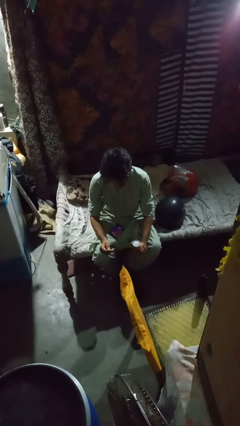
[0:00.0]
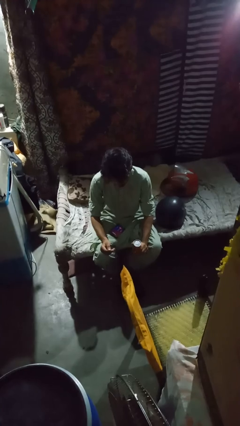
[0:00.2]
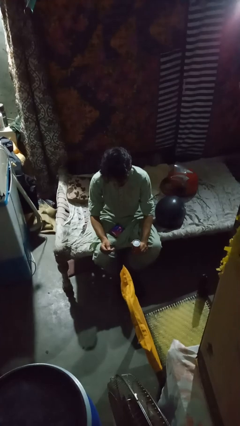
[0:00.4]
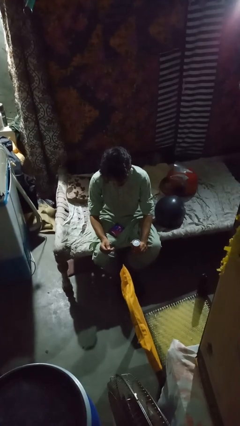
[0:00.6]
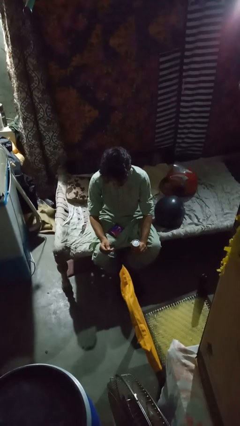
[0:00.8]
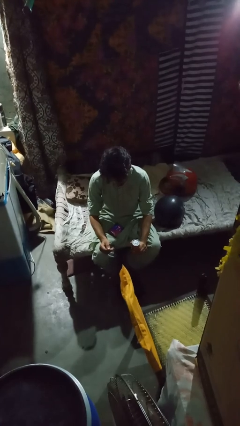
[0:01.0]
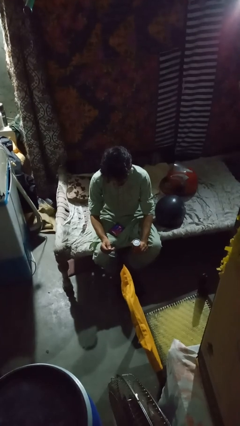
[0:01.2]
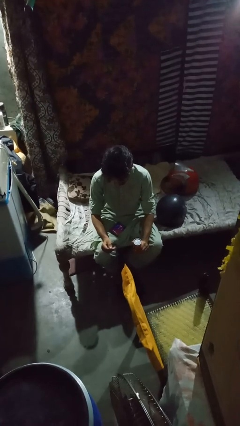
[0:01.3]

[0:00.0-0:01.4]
person opens can with can opener

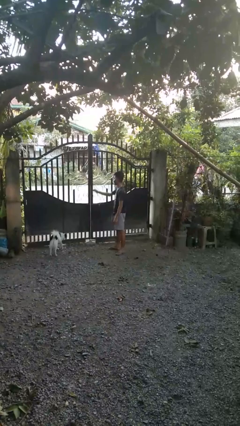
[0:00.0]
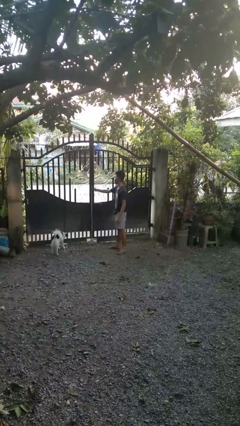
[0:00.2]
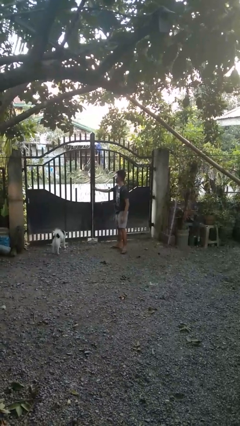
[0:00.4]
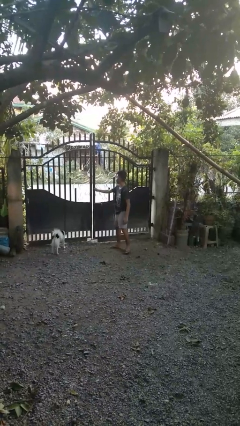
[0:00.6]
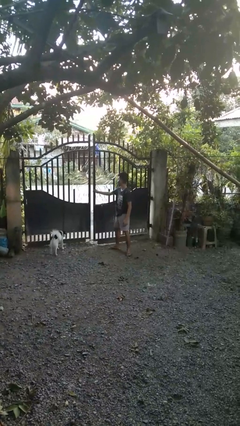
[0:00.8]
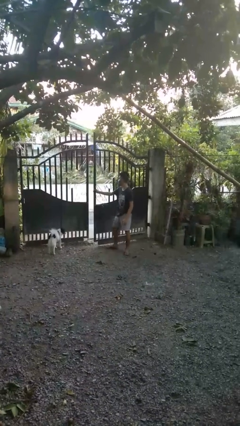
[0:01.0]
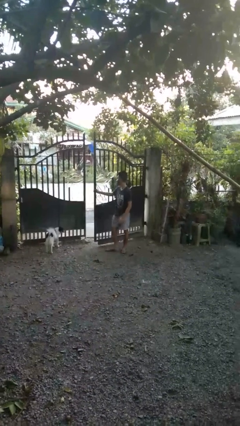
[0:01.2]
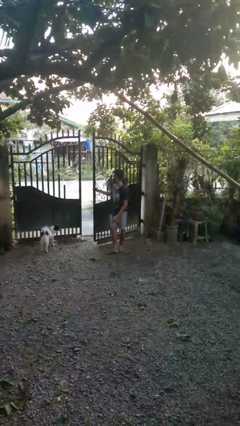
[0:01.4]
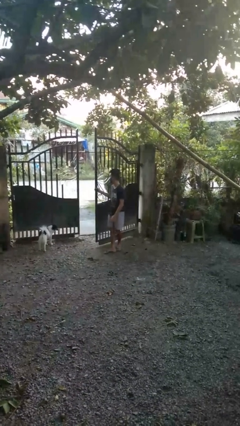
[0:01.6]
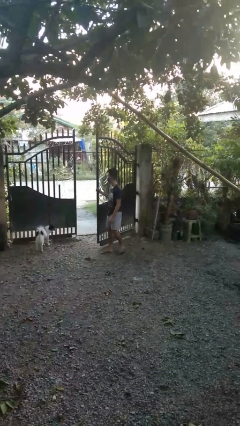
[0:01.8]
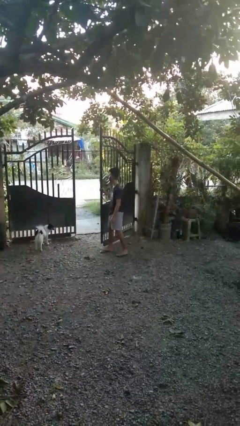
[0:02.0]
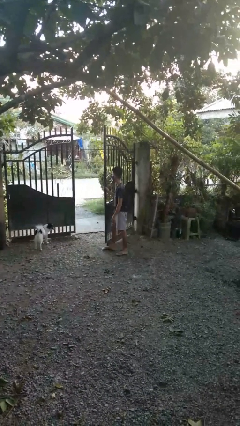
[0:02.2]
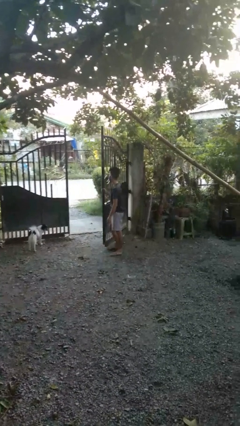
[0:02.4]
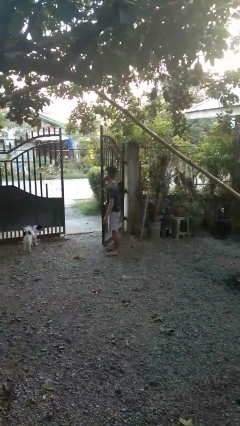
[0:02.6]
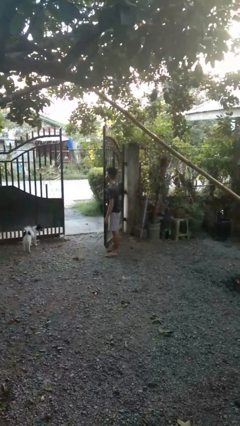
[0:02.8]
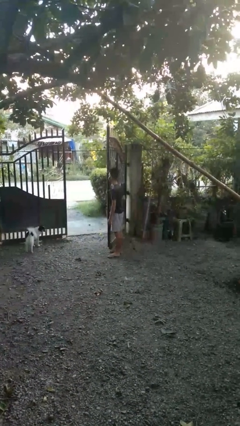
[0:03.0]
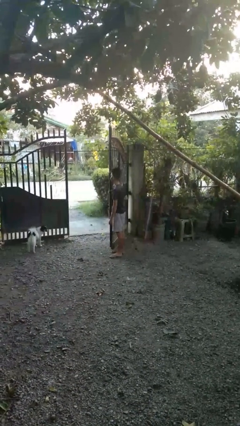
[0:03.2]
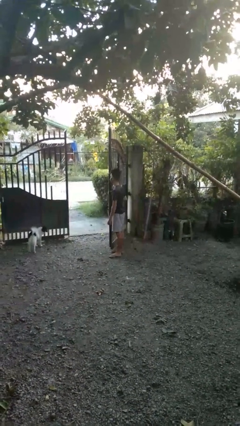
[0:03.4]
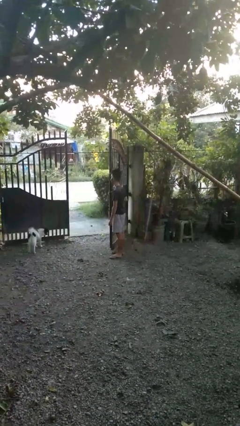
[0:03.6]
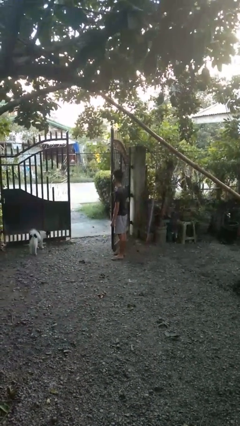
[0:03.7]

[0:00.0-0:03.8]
person opens gate

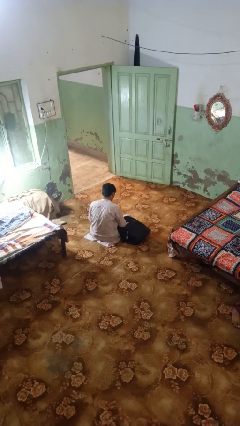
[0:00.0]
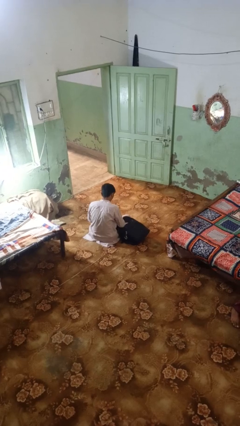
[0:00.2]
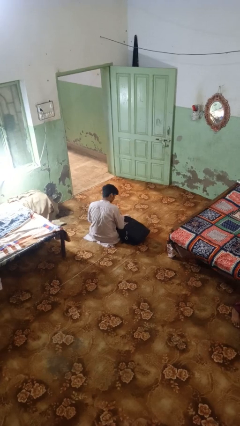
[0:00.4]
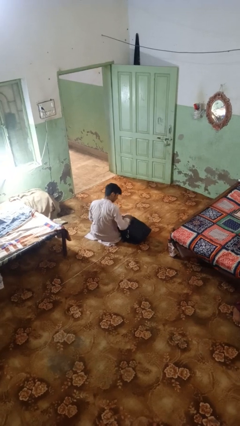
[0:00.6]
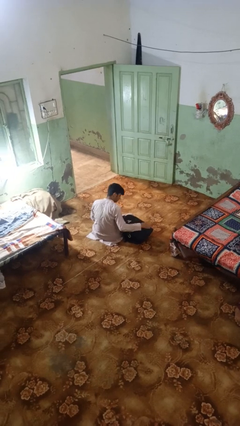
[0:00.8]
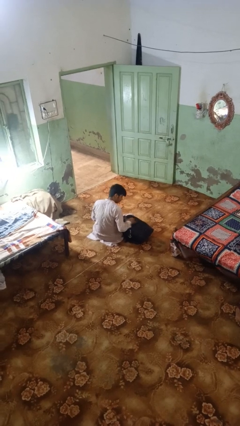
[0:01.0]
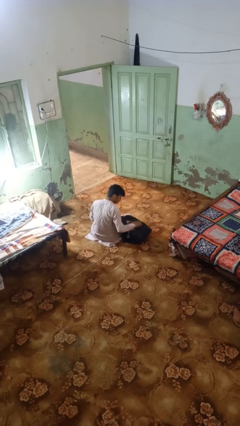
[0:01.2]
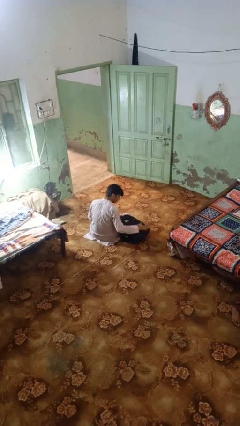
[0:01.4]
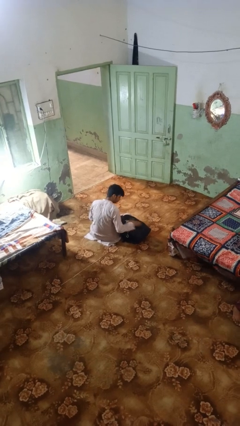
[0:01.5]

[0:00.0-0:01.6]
person waves hand over object

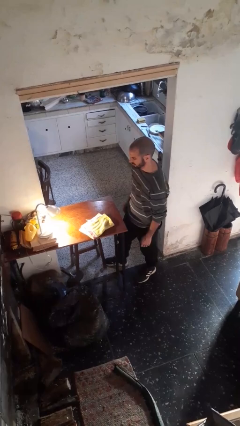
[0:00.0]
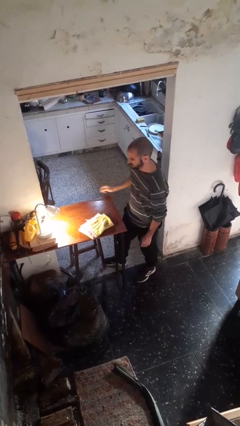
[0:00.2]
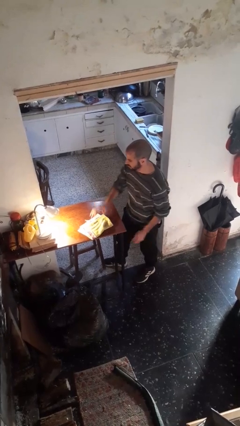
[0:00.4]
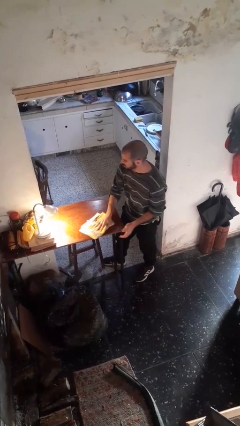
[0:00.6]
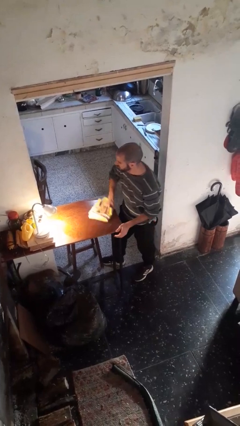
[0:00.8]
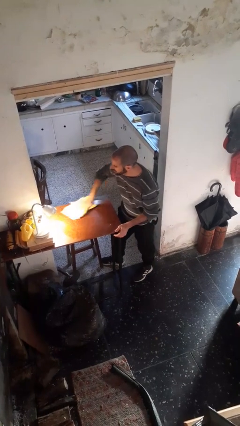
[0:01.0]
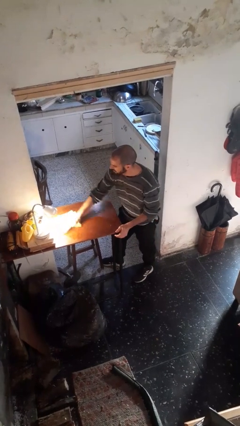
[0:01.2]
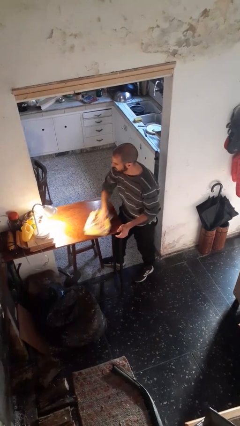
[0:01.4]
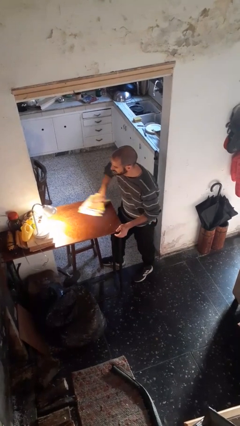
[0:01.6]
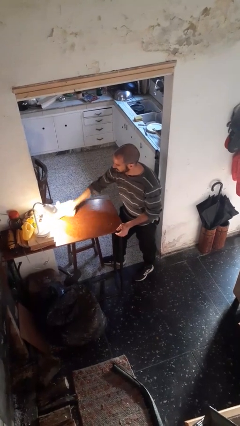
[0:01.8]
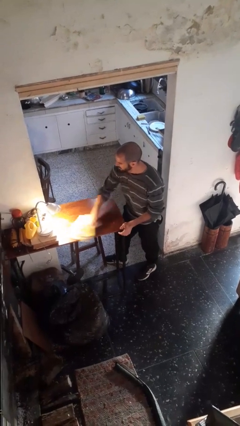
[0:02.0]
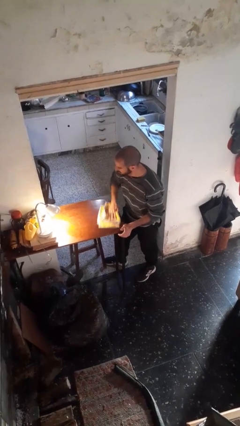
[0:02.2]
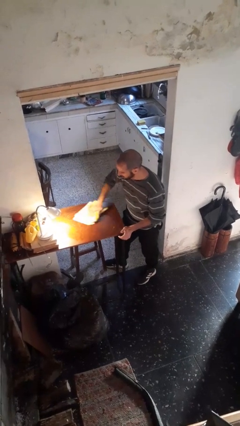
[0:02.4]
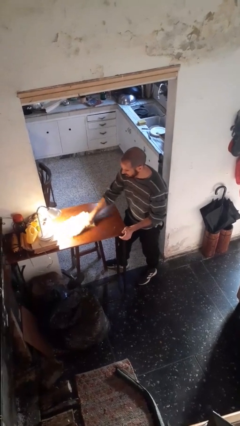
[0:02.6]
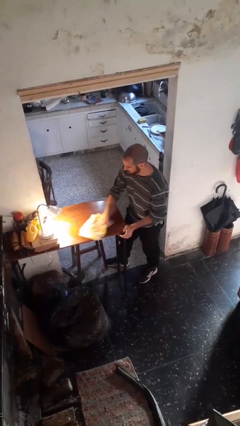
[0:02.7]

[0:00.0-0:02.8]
person cleans table with rag

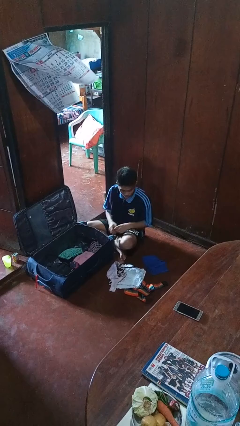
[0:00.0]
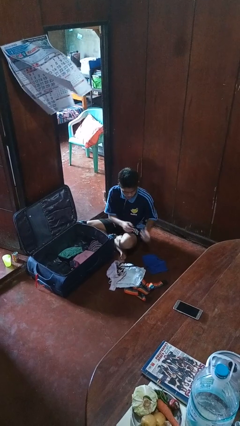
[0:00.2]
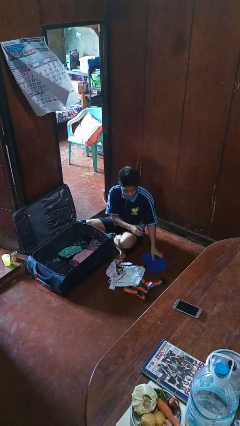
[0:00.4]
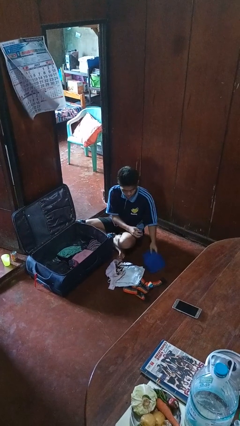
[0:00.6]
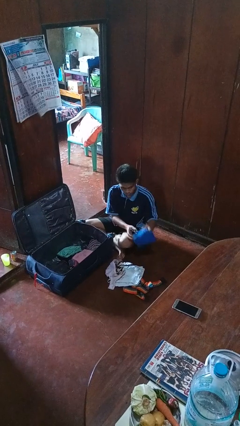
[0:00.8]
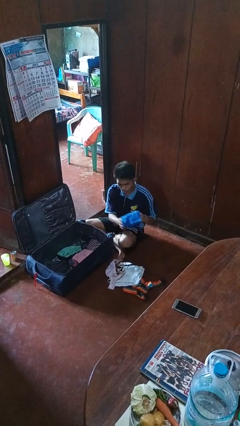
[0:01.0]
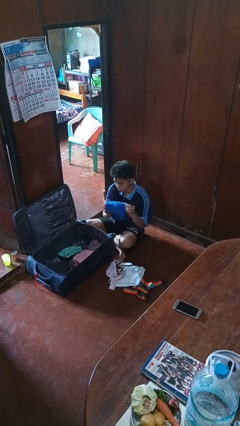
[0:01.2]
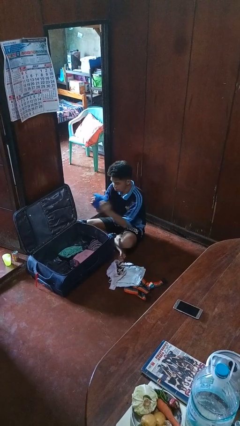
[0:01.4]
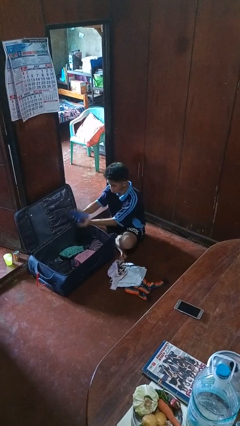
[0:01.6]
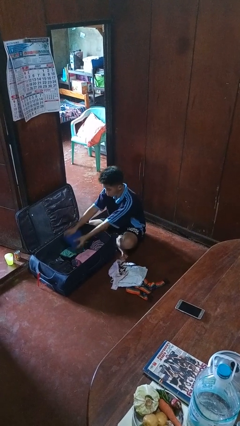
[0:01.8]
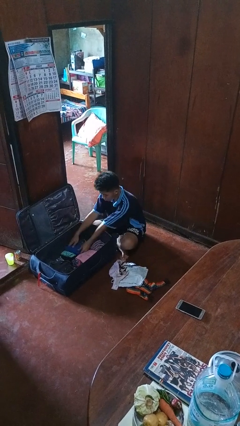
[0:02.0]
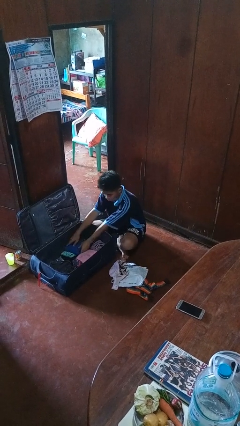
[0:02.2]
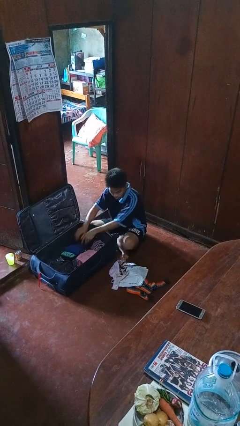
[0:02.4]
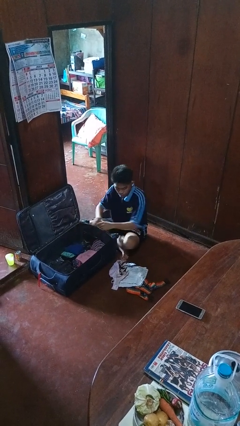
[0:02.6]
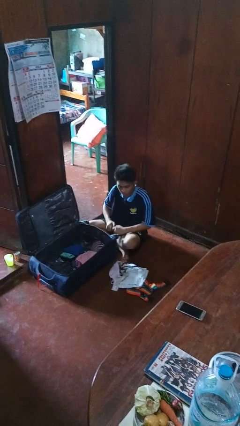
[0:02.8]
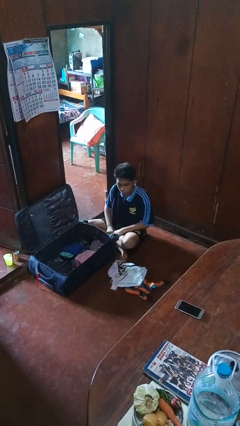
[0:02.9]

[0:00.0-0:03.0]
person loads clothes into suitcase

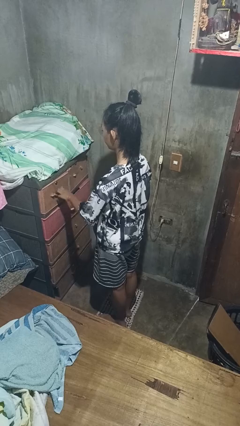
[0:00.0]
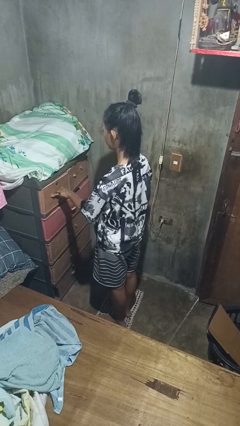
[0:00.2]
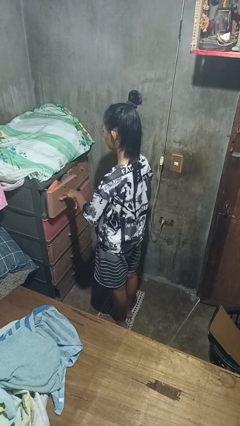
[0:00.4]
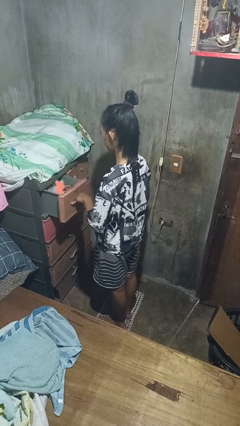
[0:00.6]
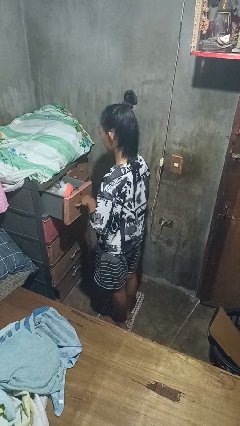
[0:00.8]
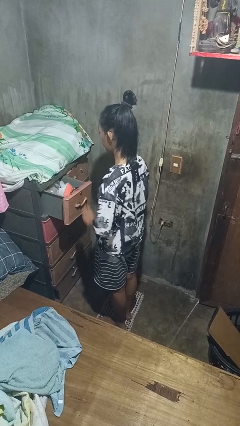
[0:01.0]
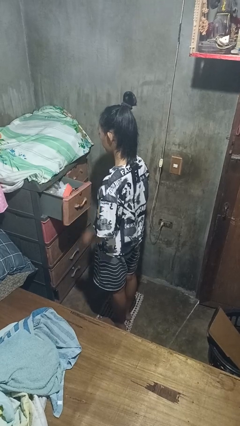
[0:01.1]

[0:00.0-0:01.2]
person opens dresser drawer

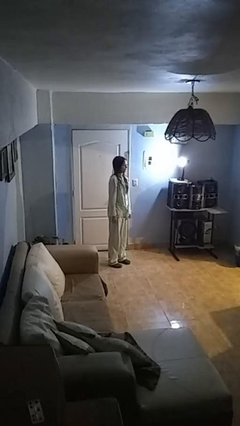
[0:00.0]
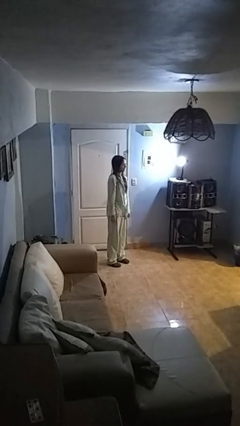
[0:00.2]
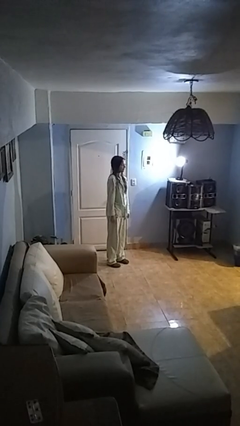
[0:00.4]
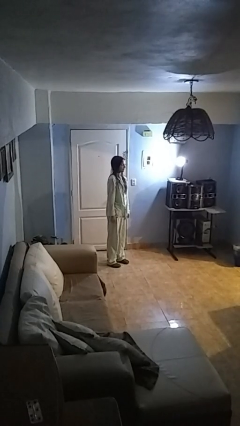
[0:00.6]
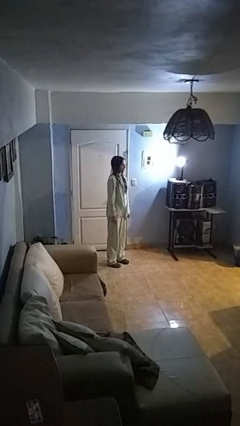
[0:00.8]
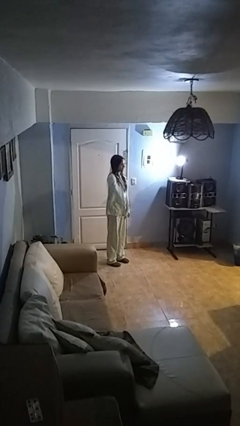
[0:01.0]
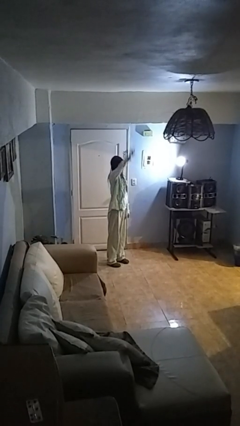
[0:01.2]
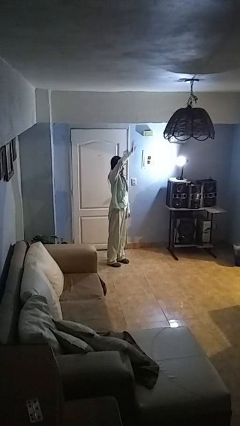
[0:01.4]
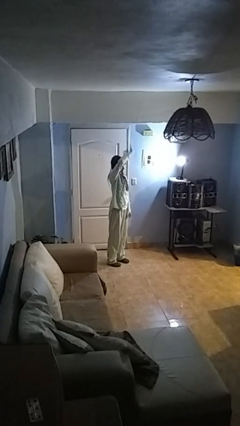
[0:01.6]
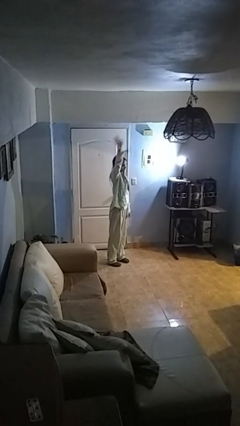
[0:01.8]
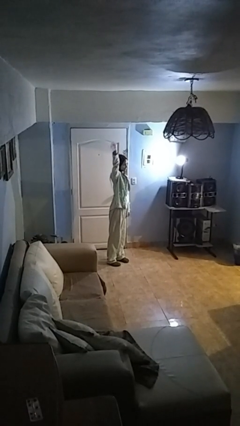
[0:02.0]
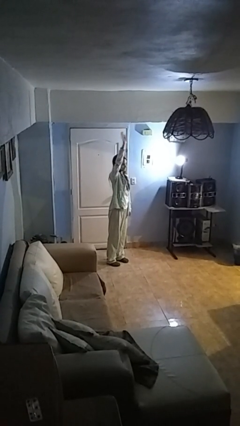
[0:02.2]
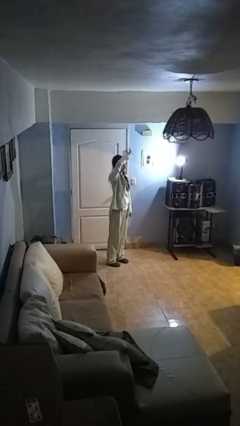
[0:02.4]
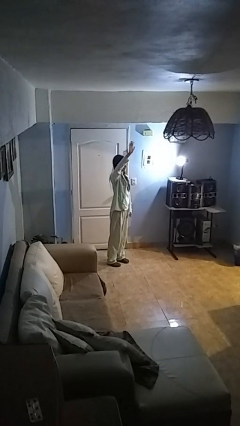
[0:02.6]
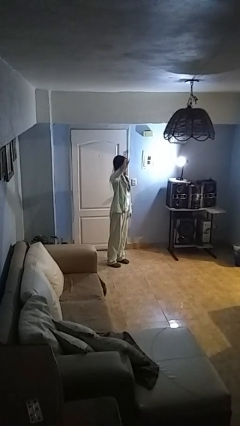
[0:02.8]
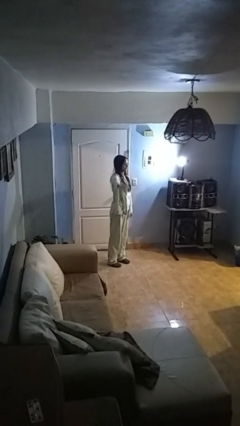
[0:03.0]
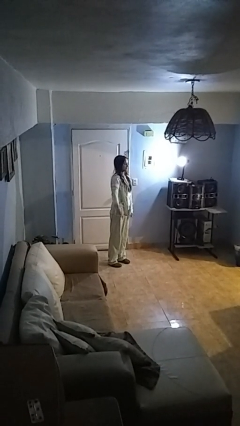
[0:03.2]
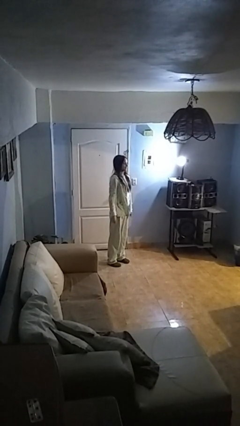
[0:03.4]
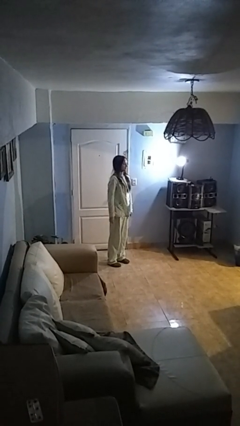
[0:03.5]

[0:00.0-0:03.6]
person waves at person
